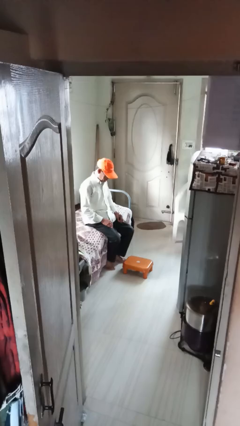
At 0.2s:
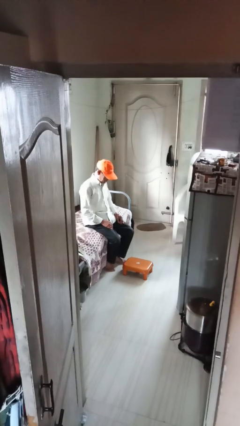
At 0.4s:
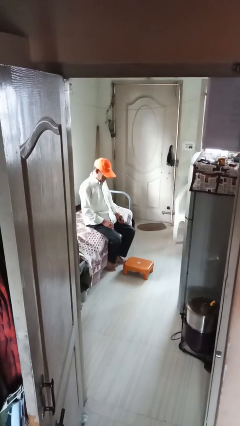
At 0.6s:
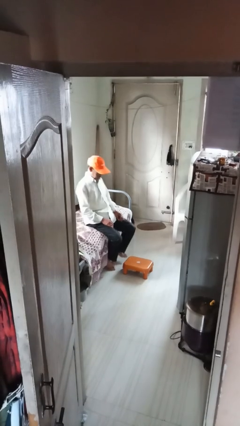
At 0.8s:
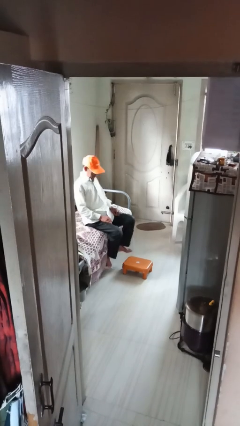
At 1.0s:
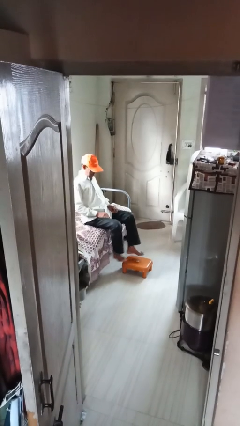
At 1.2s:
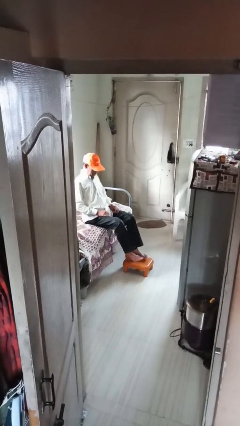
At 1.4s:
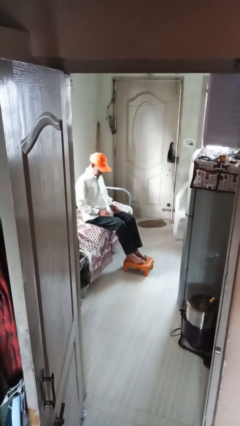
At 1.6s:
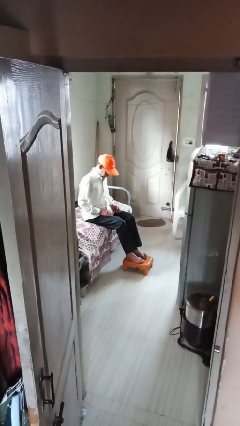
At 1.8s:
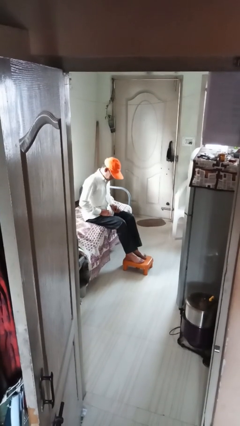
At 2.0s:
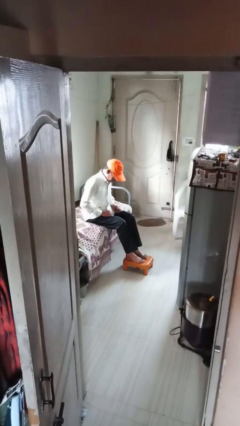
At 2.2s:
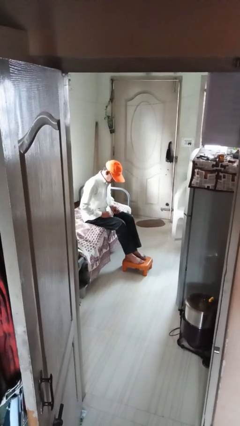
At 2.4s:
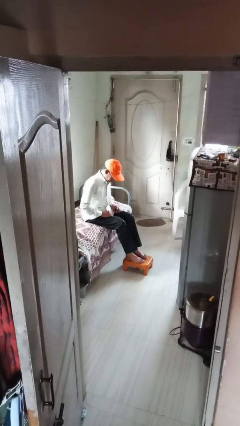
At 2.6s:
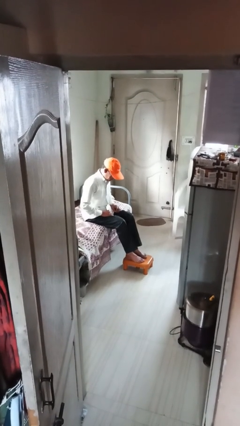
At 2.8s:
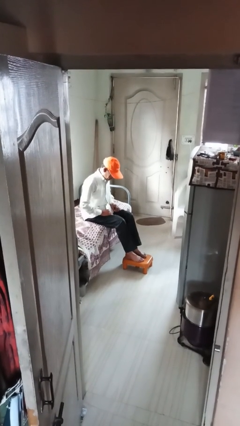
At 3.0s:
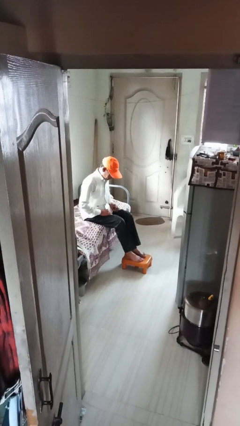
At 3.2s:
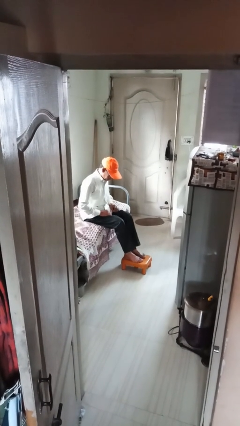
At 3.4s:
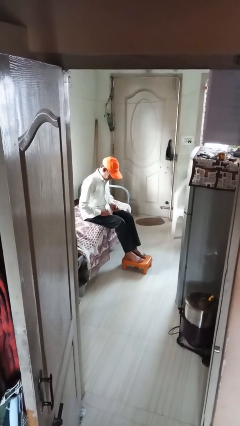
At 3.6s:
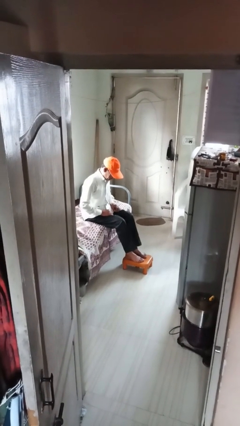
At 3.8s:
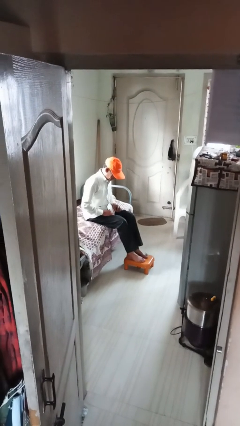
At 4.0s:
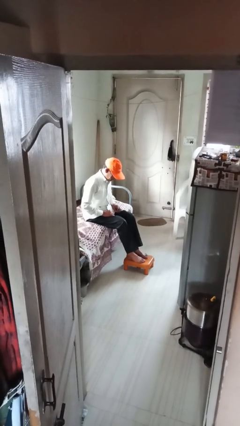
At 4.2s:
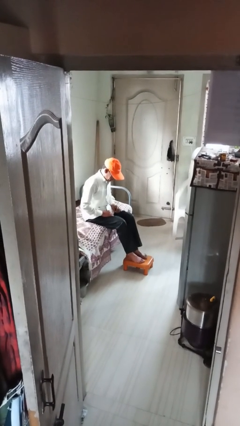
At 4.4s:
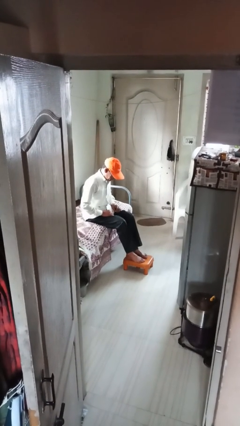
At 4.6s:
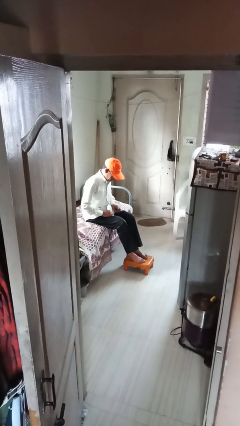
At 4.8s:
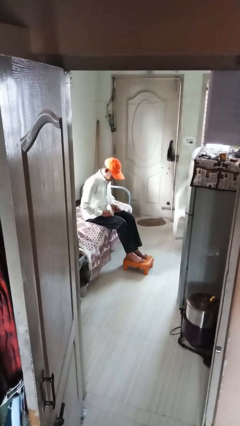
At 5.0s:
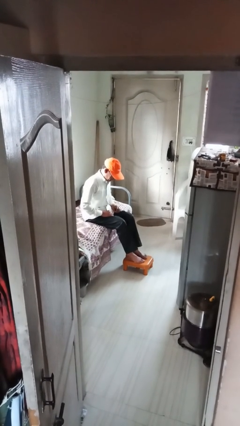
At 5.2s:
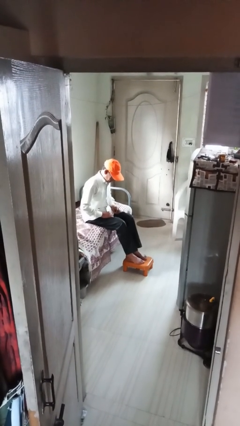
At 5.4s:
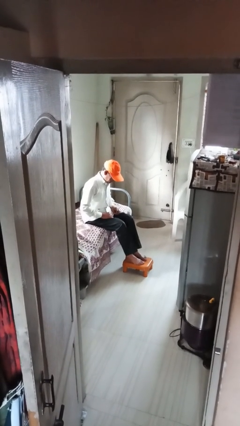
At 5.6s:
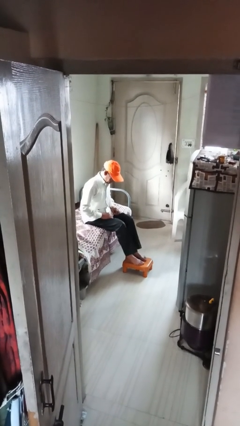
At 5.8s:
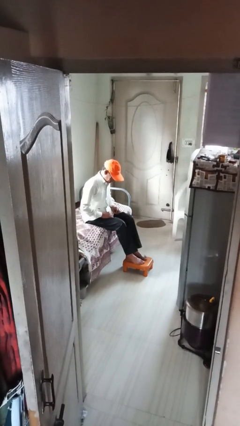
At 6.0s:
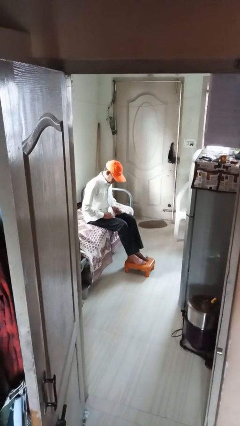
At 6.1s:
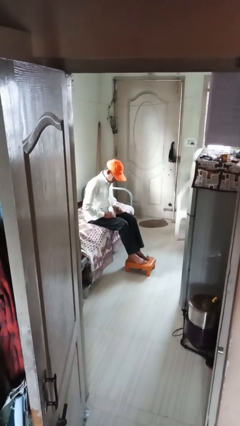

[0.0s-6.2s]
person puts feet up

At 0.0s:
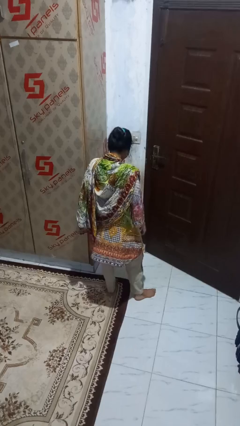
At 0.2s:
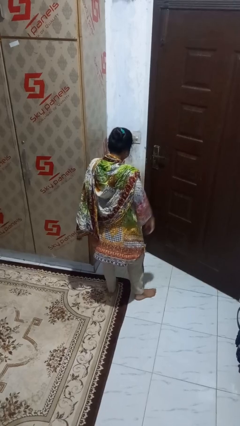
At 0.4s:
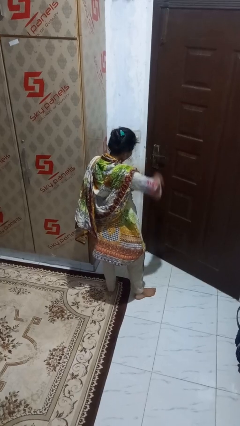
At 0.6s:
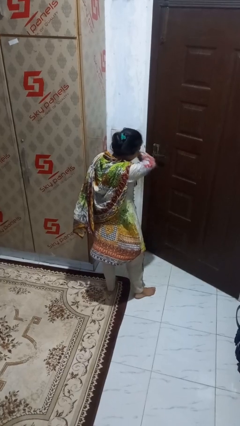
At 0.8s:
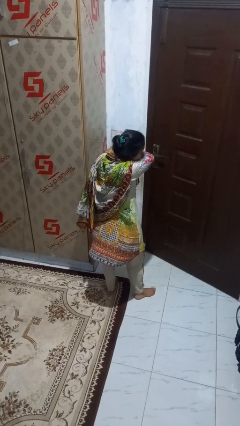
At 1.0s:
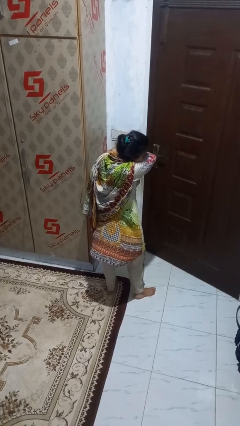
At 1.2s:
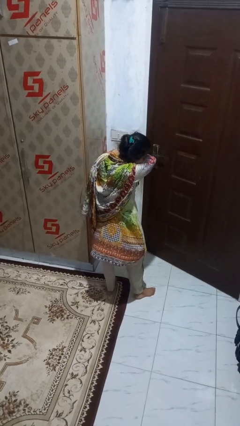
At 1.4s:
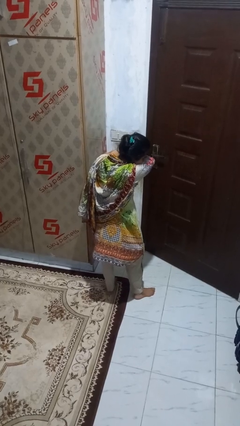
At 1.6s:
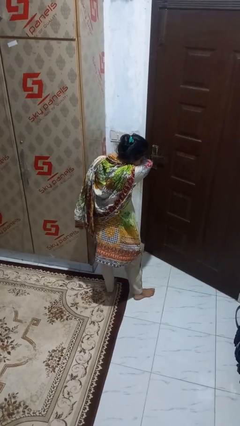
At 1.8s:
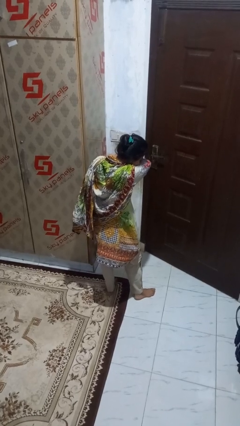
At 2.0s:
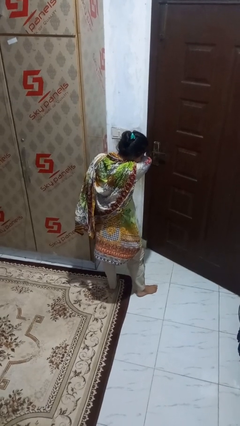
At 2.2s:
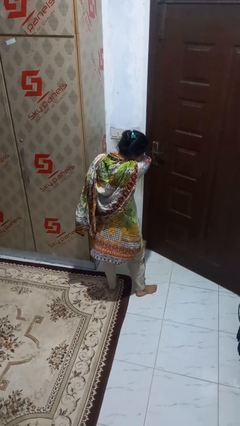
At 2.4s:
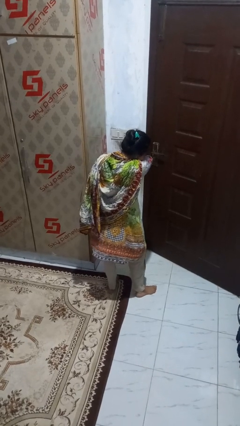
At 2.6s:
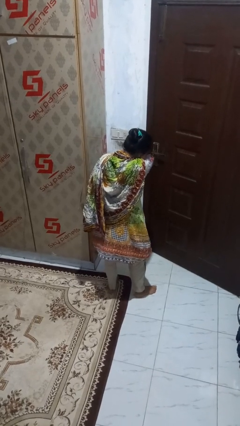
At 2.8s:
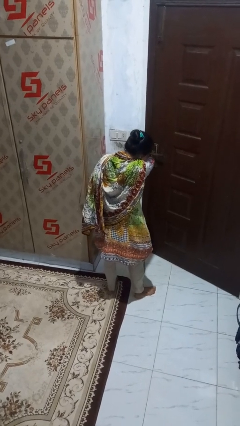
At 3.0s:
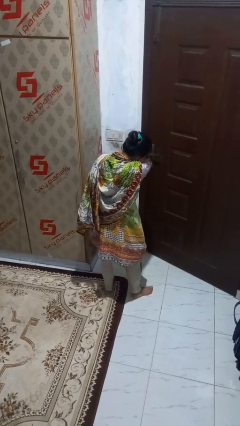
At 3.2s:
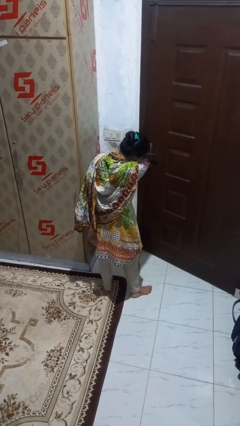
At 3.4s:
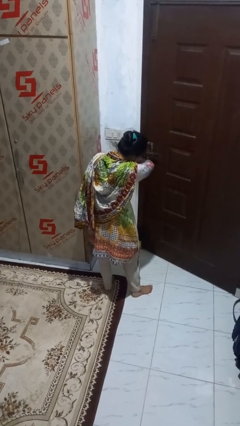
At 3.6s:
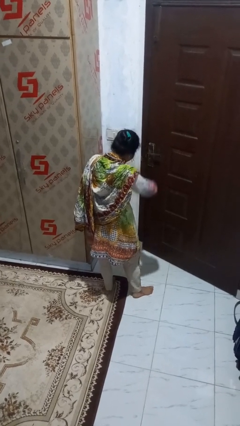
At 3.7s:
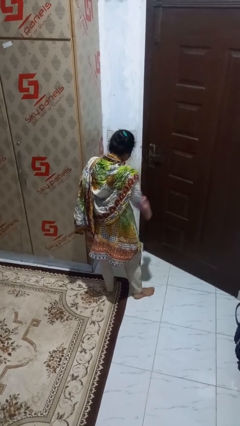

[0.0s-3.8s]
person sneezes into arm

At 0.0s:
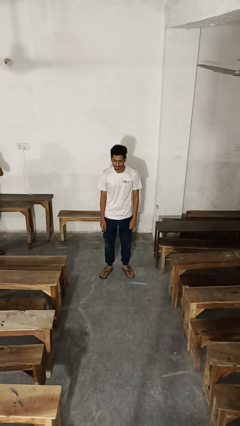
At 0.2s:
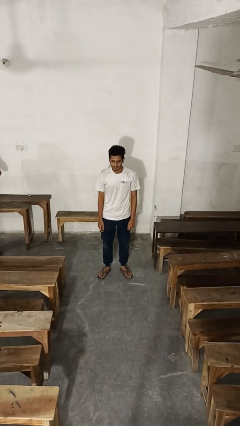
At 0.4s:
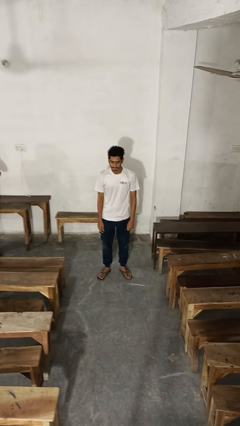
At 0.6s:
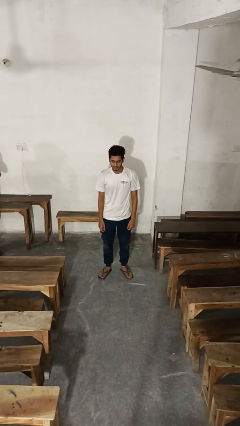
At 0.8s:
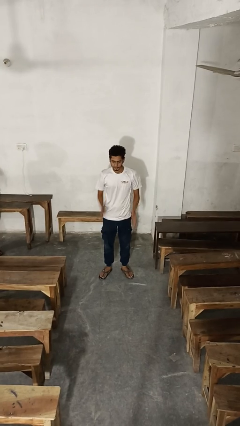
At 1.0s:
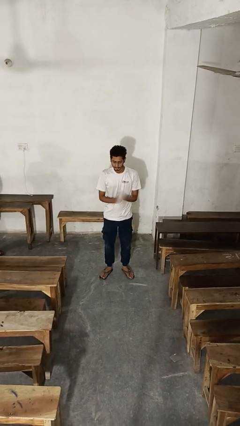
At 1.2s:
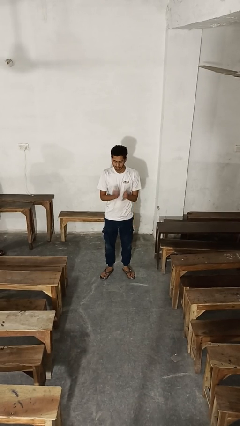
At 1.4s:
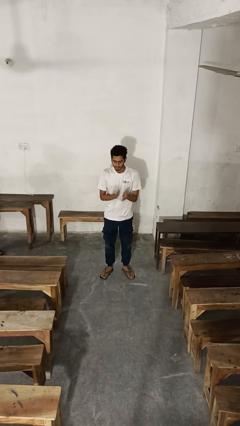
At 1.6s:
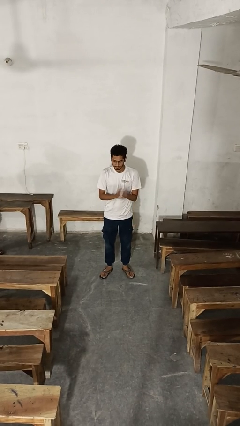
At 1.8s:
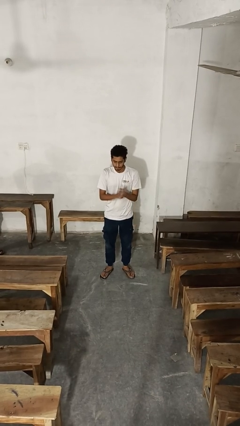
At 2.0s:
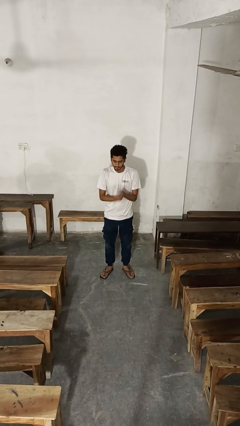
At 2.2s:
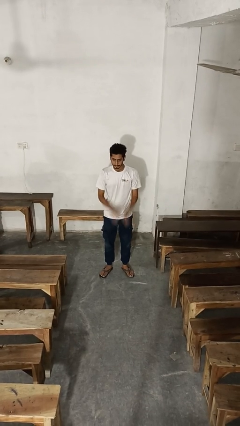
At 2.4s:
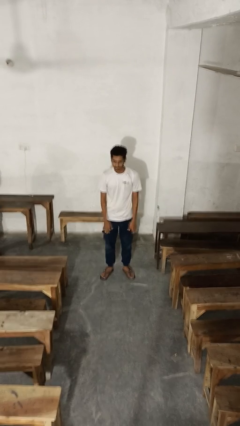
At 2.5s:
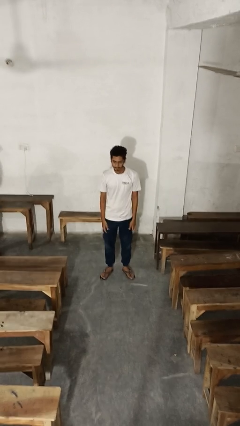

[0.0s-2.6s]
person claps hands

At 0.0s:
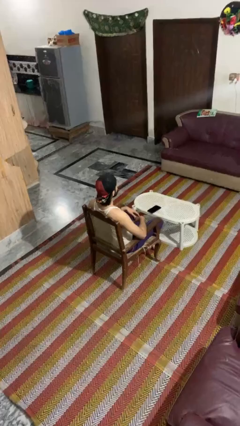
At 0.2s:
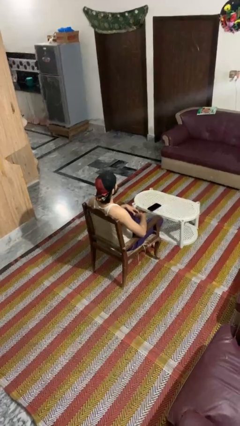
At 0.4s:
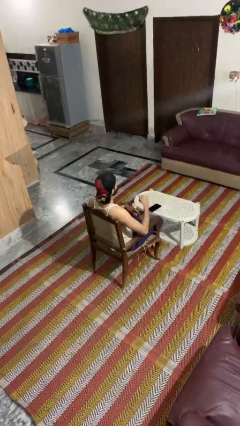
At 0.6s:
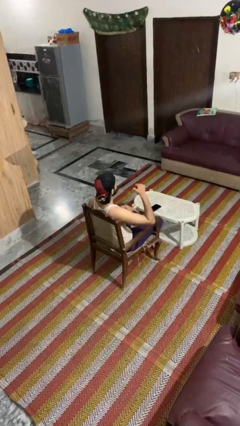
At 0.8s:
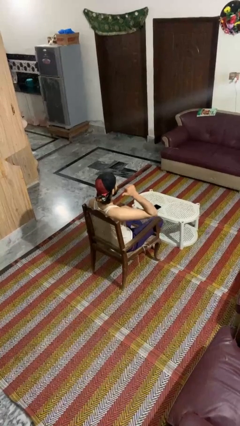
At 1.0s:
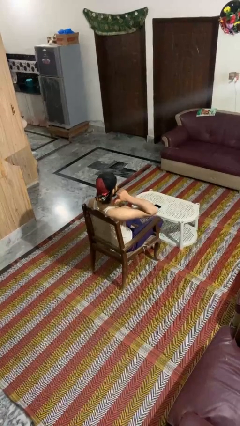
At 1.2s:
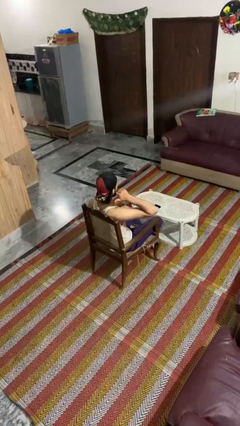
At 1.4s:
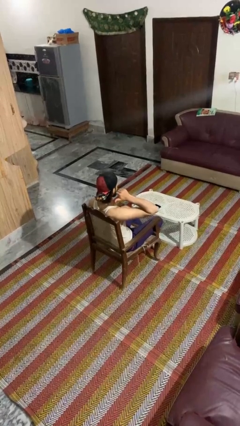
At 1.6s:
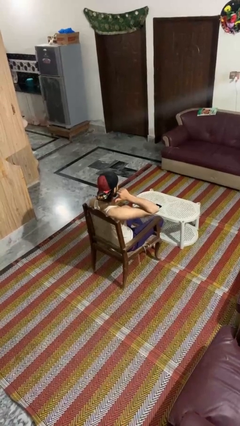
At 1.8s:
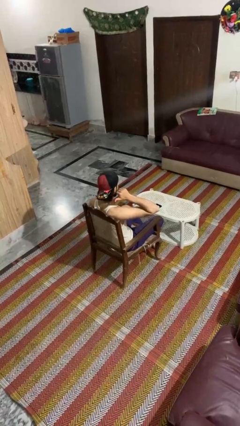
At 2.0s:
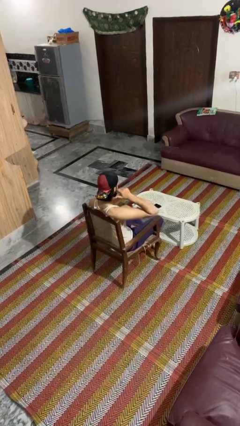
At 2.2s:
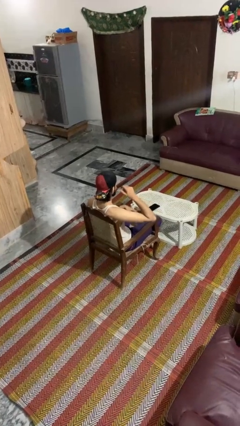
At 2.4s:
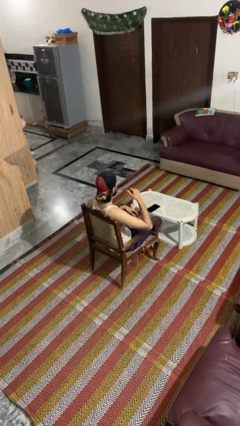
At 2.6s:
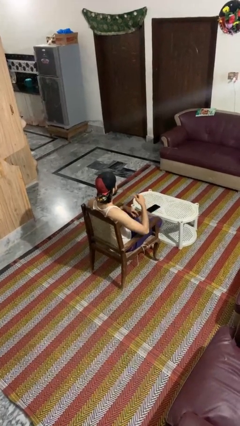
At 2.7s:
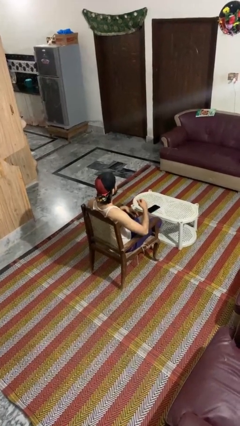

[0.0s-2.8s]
person gestures behind me

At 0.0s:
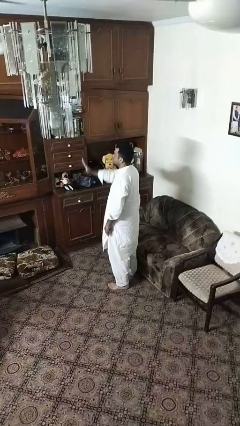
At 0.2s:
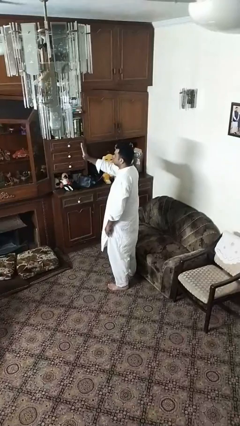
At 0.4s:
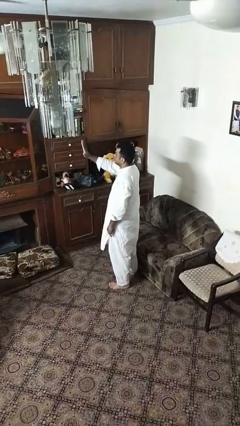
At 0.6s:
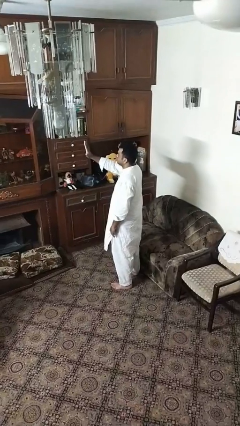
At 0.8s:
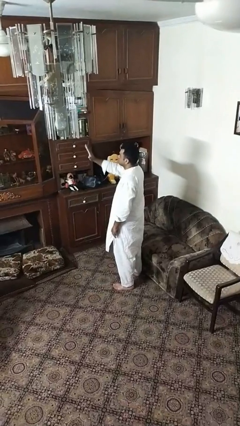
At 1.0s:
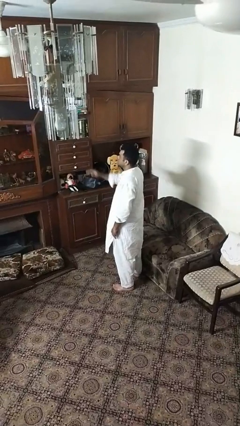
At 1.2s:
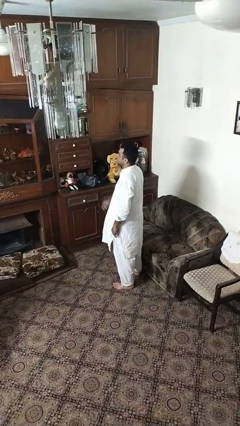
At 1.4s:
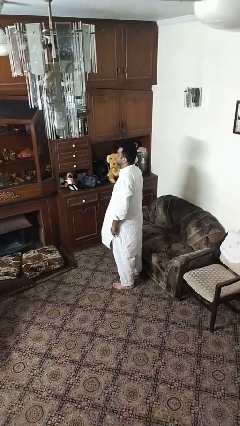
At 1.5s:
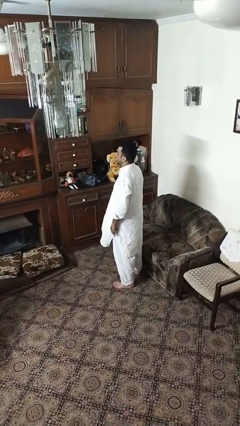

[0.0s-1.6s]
person gestures stop

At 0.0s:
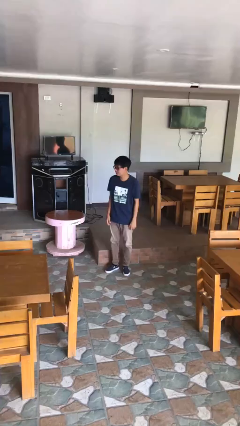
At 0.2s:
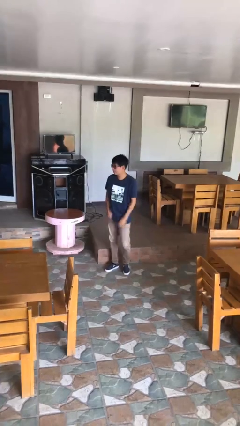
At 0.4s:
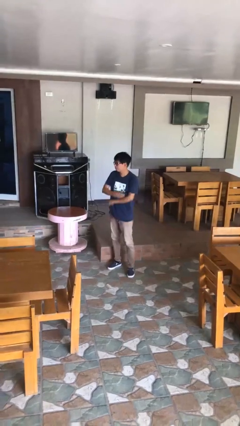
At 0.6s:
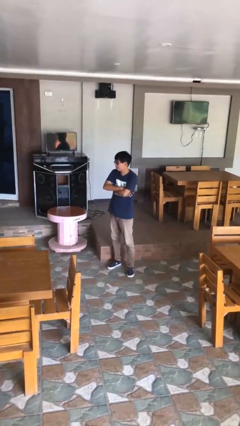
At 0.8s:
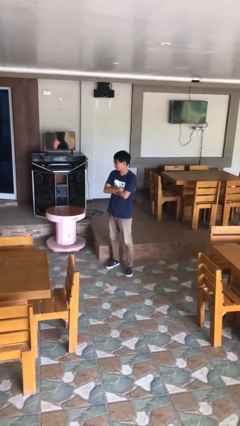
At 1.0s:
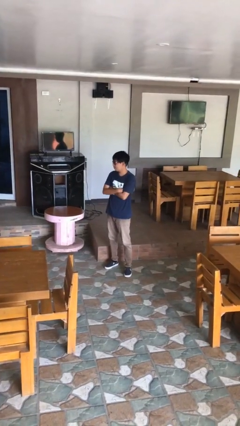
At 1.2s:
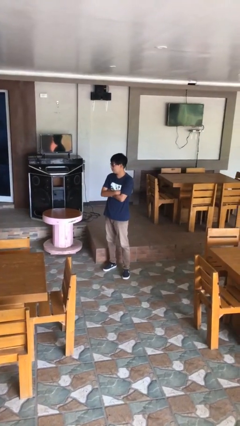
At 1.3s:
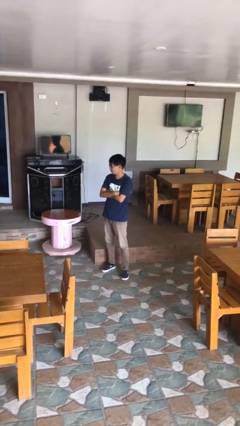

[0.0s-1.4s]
person crosses arms
